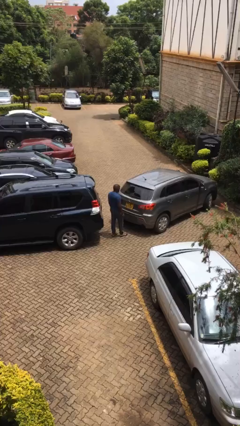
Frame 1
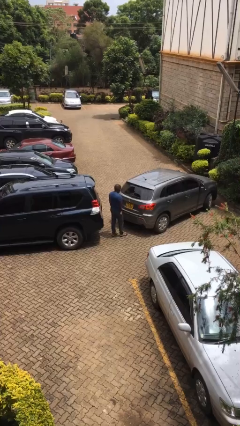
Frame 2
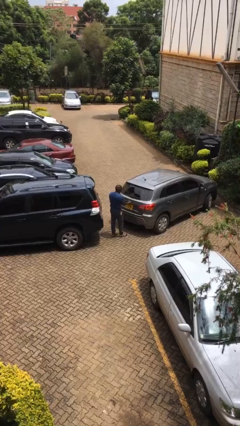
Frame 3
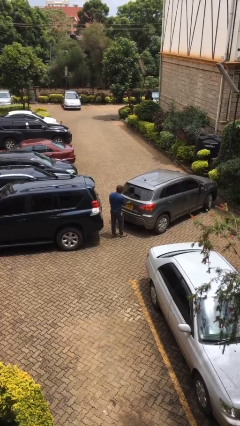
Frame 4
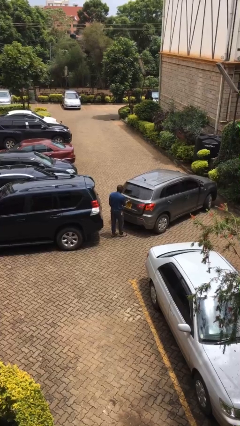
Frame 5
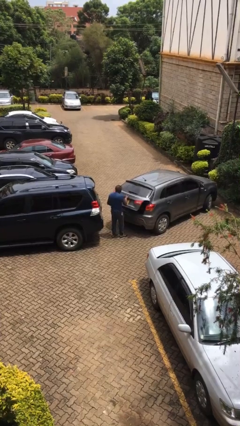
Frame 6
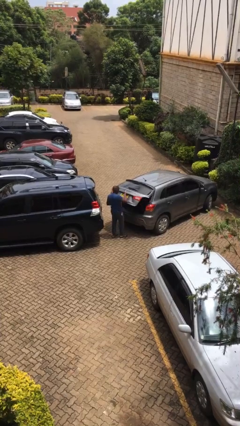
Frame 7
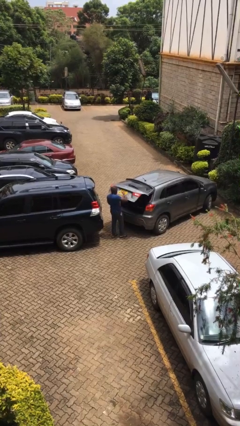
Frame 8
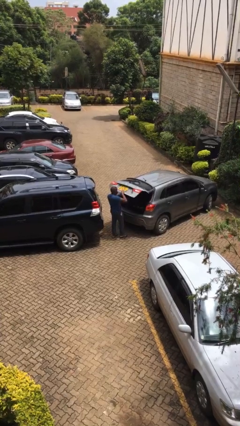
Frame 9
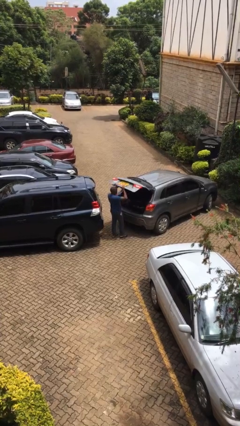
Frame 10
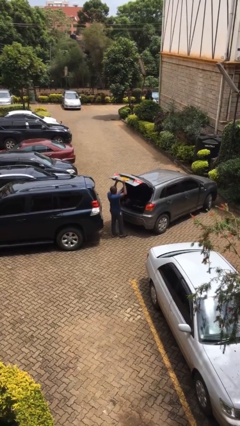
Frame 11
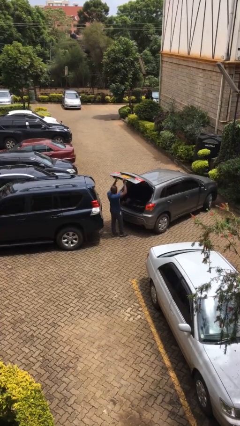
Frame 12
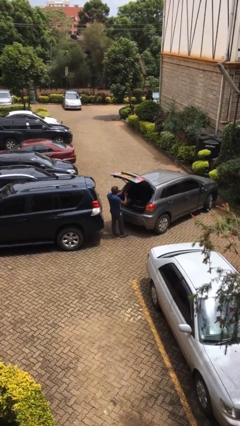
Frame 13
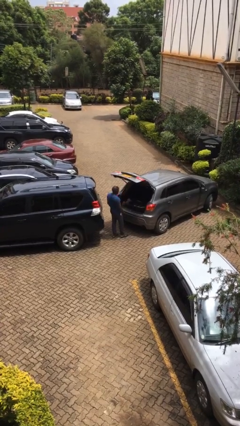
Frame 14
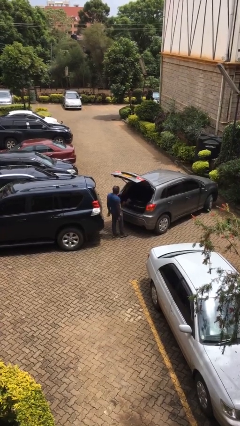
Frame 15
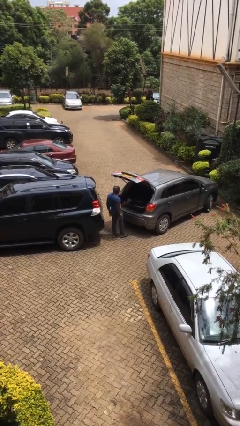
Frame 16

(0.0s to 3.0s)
person opens car trunk

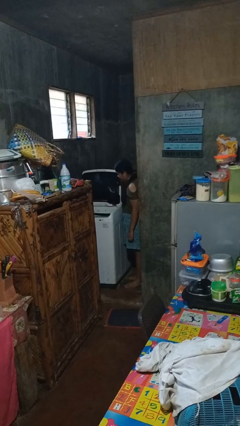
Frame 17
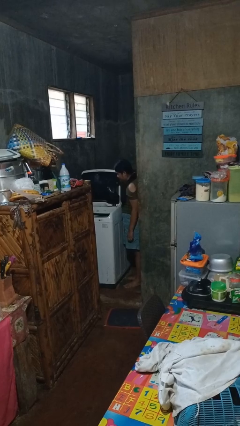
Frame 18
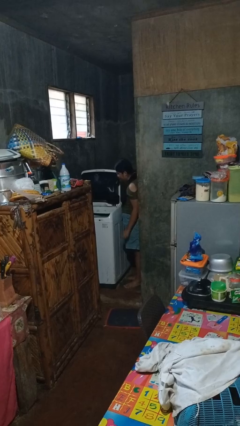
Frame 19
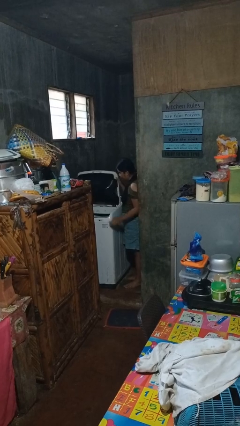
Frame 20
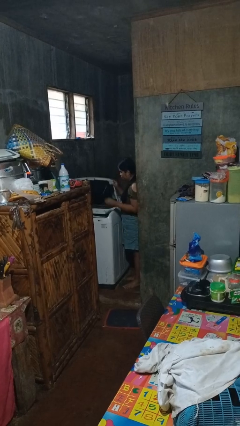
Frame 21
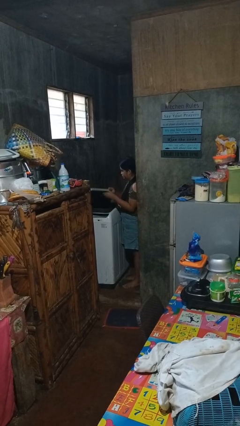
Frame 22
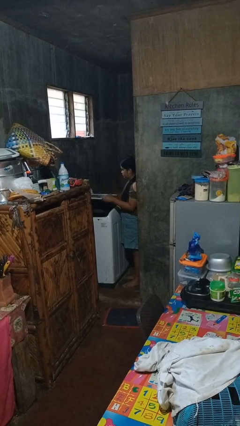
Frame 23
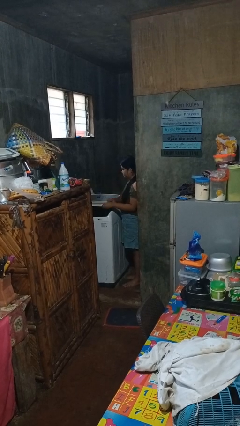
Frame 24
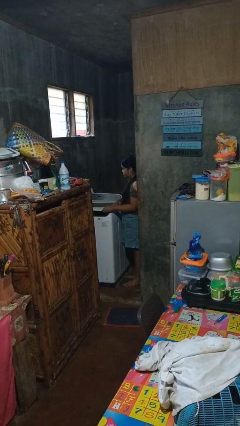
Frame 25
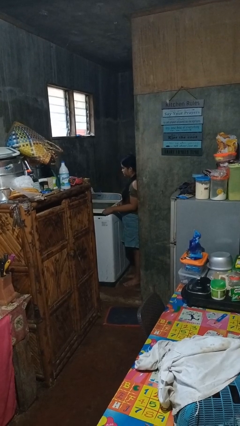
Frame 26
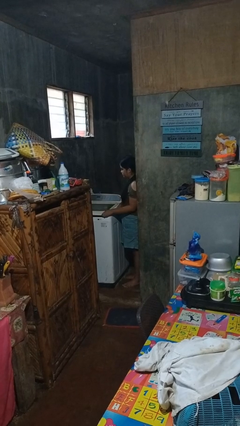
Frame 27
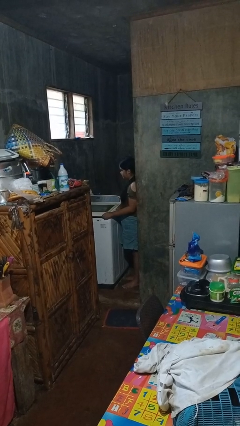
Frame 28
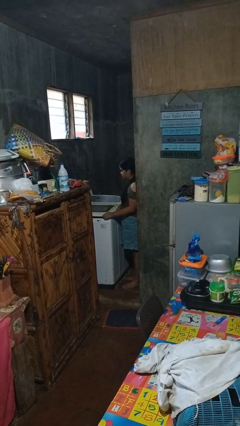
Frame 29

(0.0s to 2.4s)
person closes clothes washer

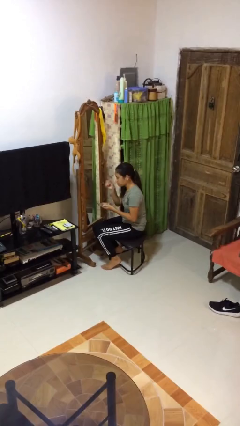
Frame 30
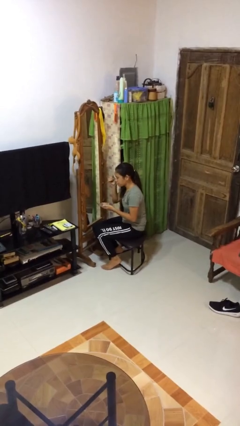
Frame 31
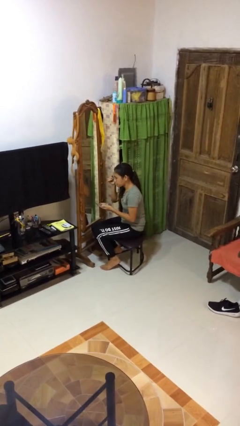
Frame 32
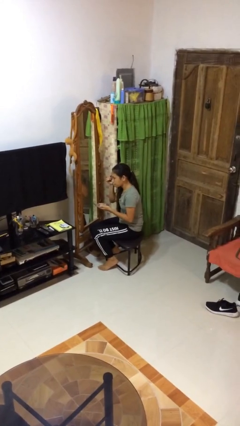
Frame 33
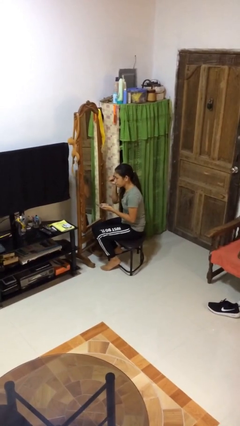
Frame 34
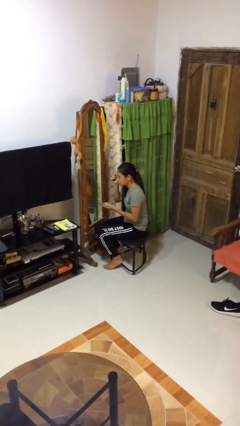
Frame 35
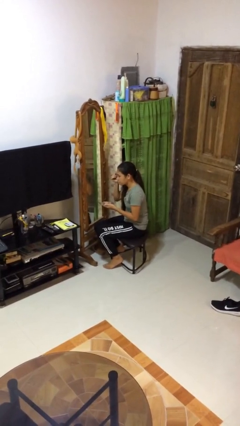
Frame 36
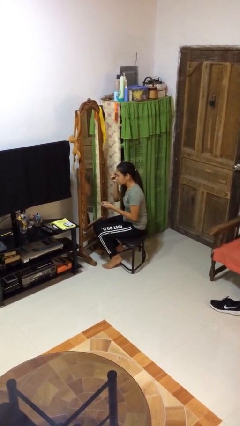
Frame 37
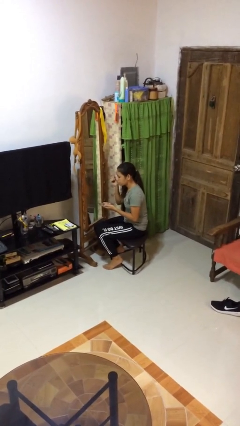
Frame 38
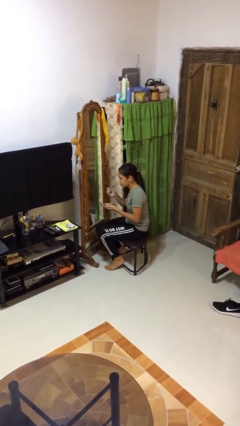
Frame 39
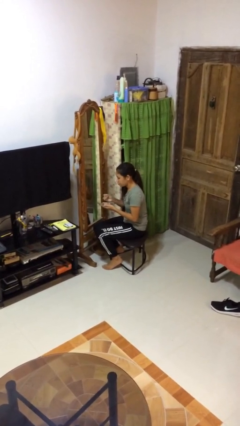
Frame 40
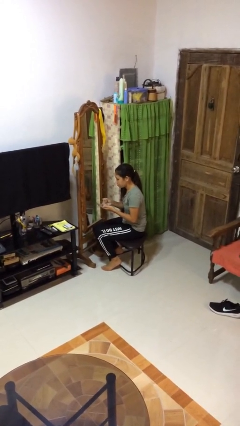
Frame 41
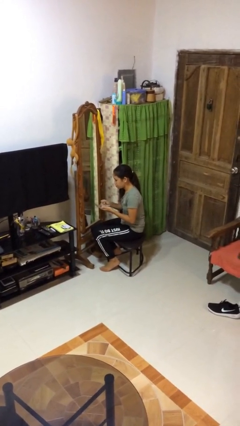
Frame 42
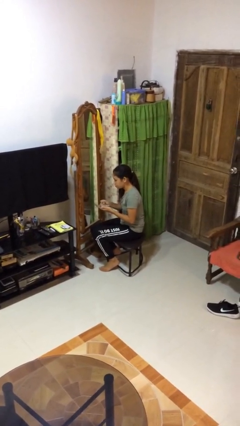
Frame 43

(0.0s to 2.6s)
person applies eye makeup

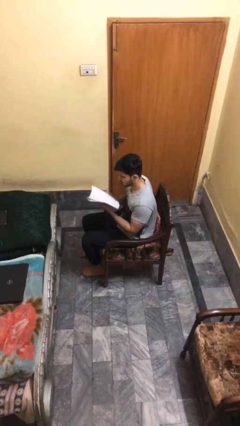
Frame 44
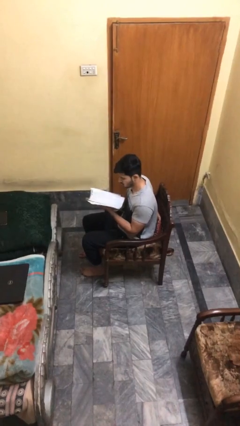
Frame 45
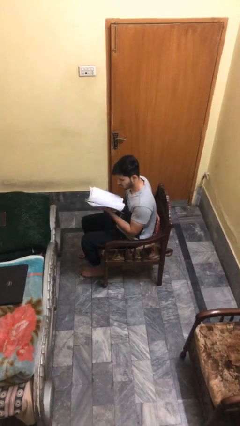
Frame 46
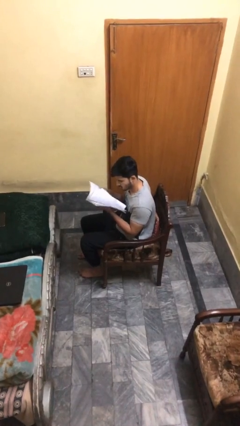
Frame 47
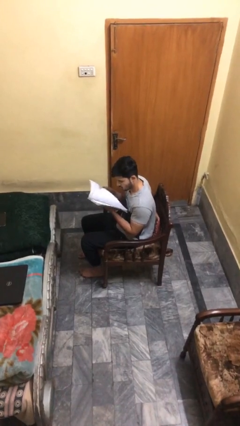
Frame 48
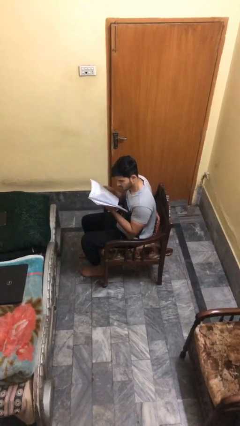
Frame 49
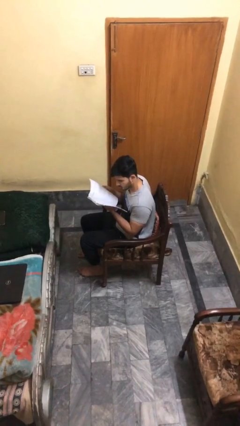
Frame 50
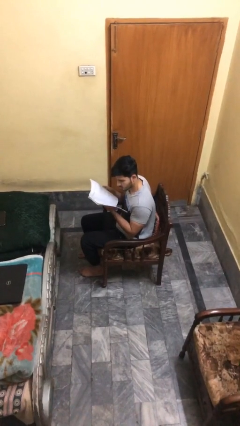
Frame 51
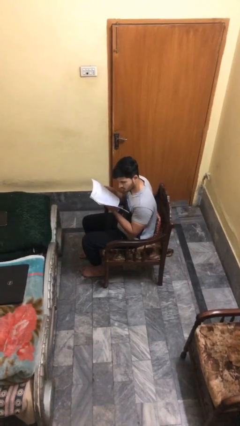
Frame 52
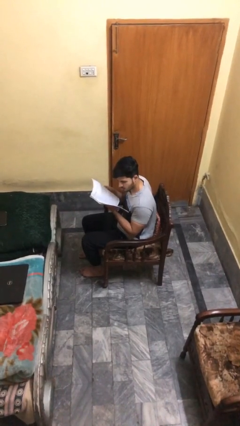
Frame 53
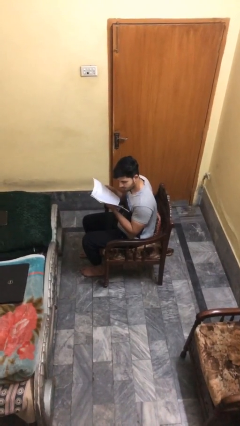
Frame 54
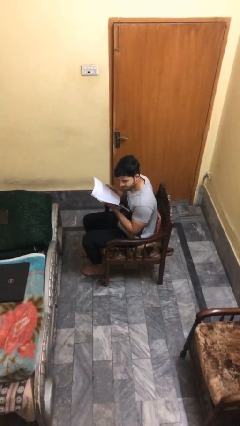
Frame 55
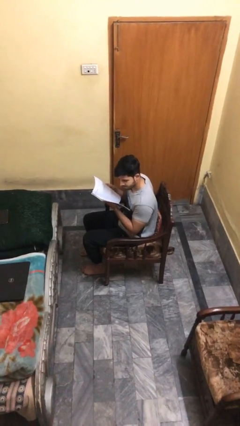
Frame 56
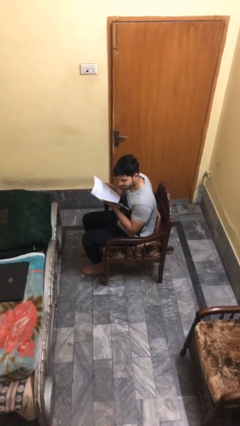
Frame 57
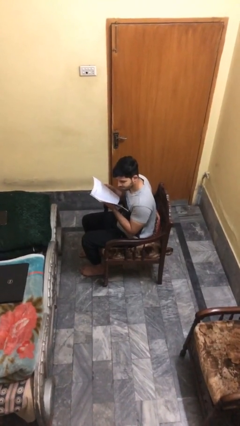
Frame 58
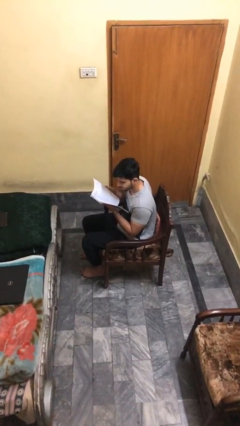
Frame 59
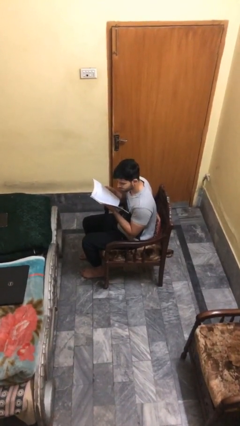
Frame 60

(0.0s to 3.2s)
person reads document

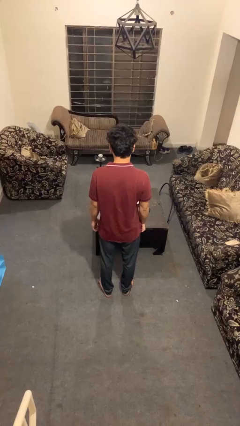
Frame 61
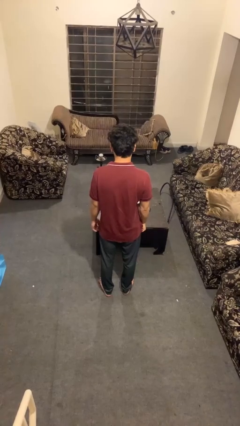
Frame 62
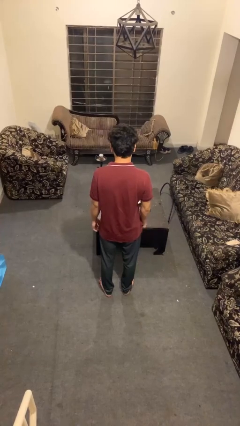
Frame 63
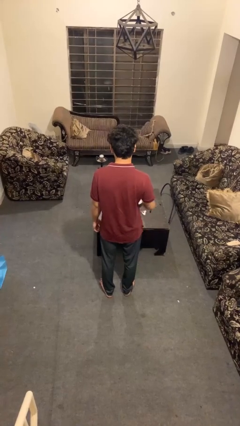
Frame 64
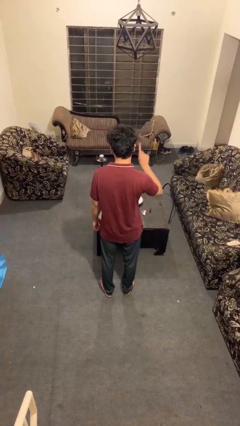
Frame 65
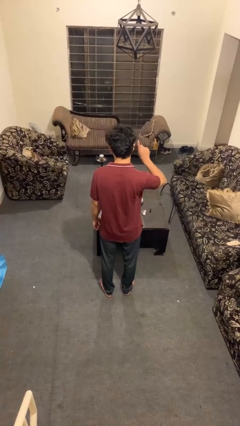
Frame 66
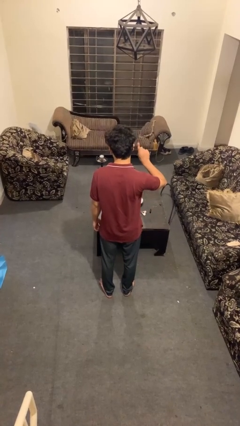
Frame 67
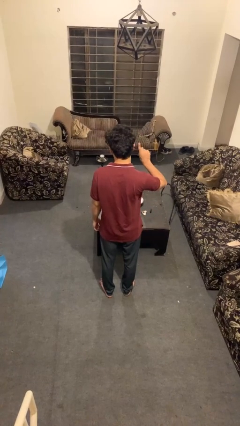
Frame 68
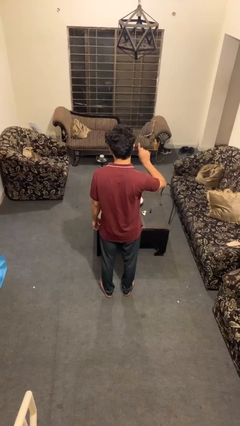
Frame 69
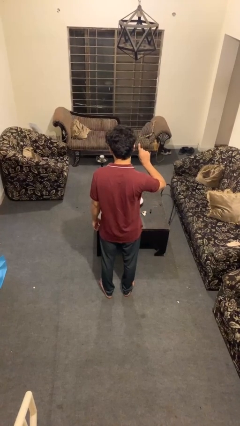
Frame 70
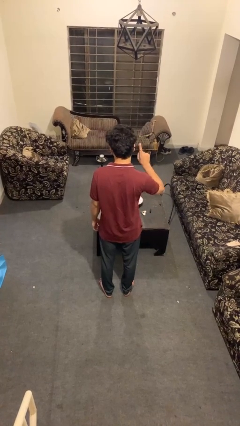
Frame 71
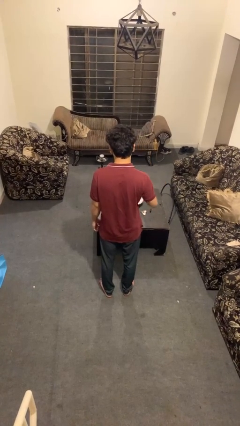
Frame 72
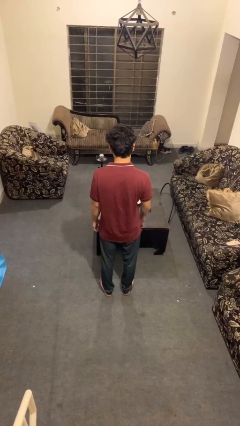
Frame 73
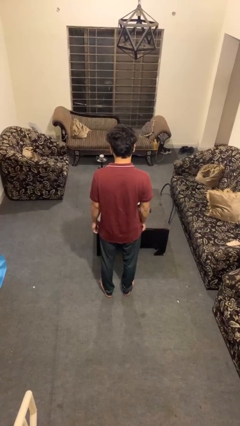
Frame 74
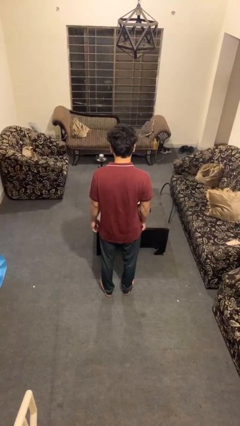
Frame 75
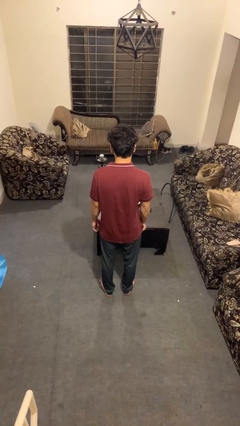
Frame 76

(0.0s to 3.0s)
person gestures number one

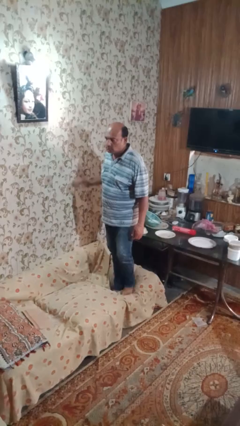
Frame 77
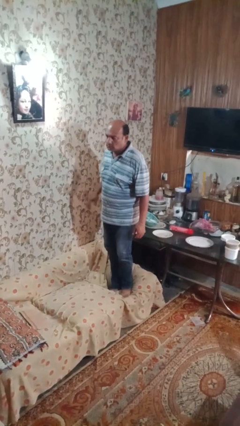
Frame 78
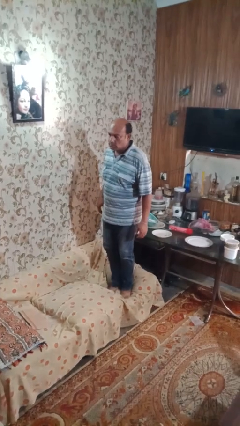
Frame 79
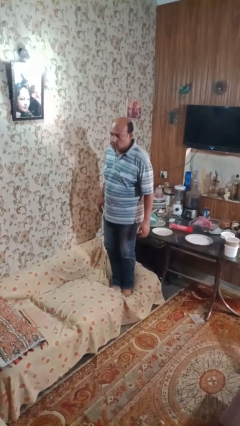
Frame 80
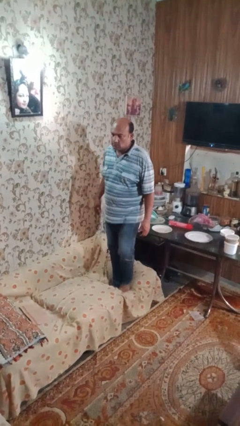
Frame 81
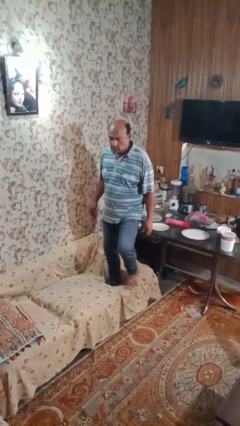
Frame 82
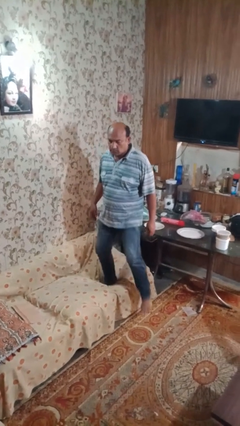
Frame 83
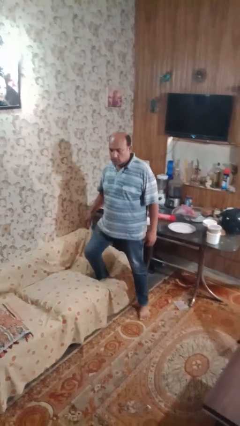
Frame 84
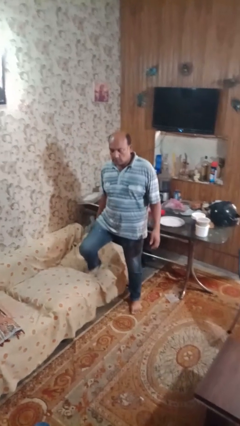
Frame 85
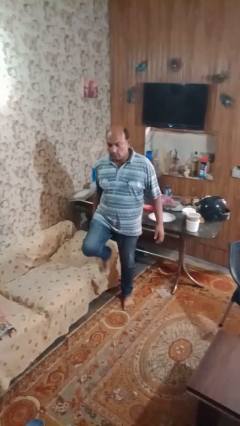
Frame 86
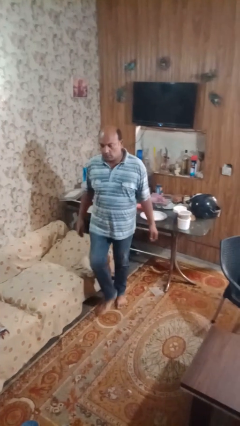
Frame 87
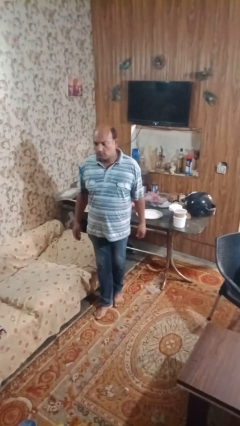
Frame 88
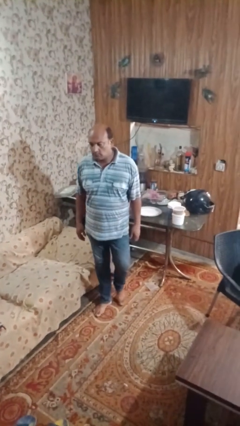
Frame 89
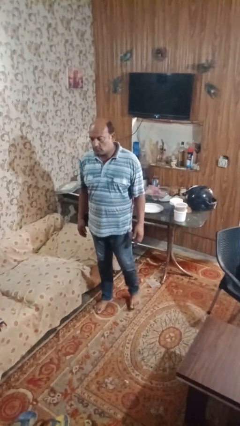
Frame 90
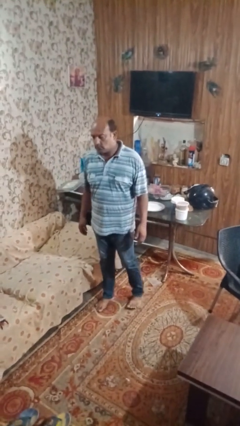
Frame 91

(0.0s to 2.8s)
person climbs off couch

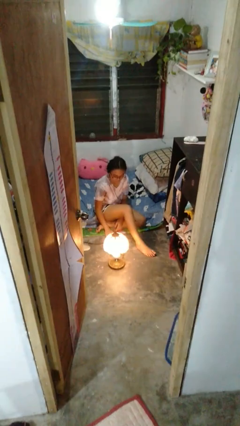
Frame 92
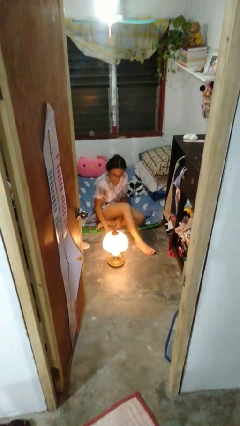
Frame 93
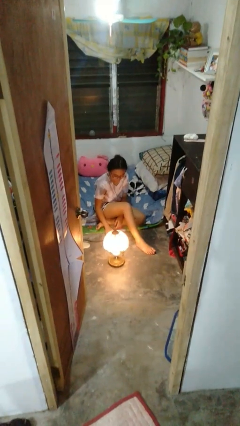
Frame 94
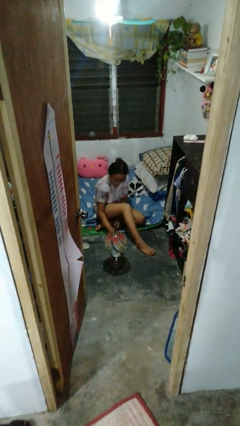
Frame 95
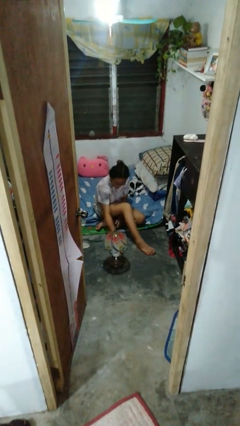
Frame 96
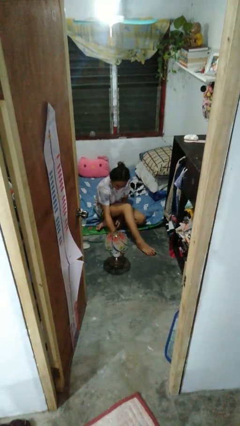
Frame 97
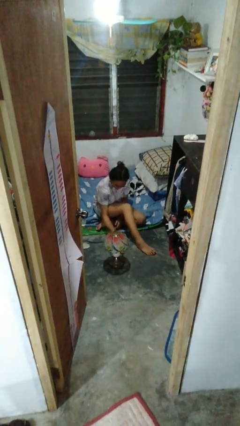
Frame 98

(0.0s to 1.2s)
person turns off lamp
